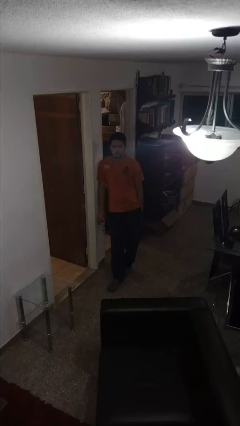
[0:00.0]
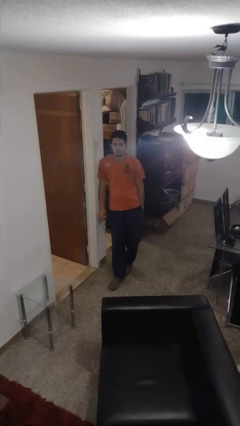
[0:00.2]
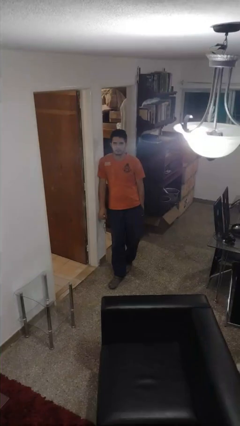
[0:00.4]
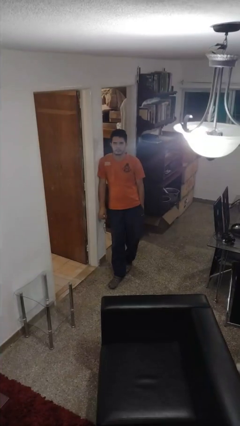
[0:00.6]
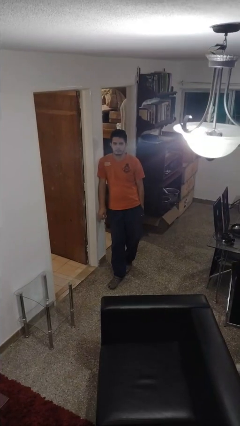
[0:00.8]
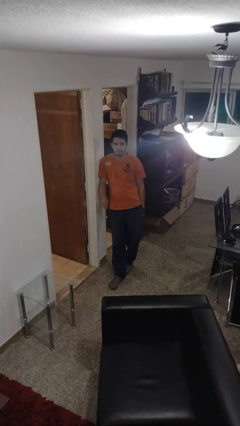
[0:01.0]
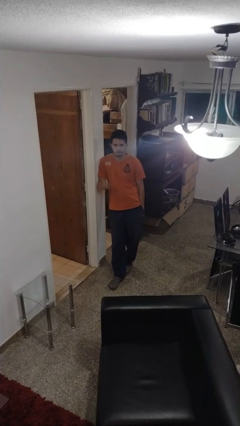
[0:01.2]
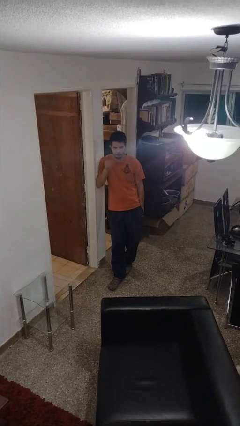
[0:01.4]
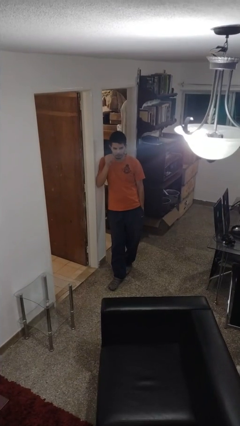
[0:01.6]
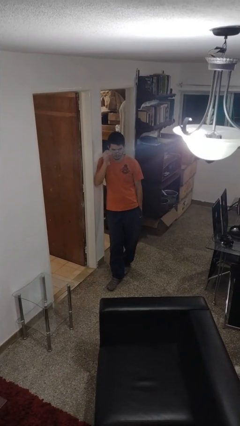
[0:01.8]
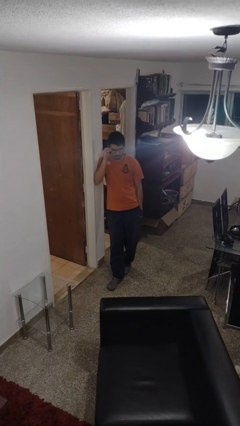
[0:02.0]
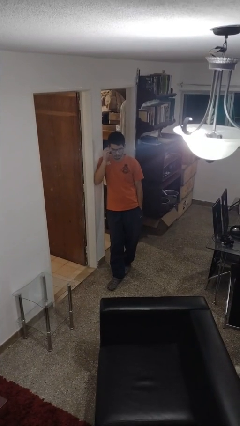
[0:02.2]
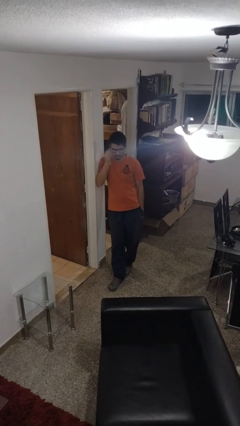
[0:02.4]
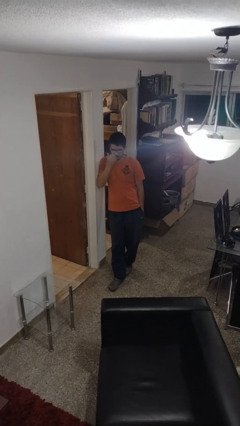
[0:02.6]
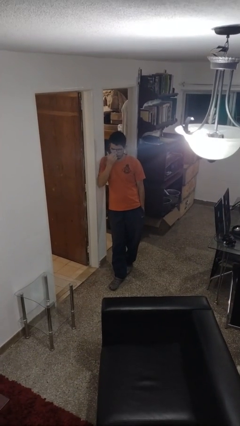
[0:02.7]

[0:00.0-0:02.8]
person puts on glasses

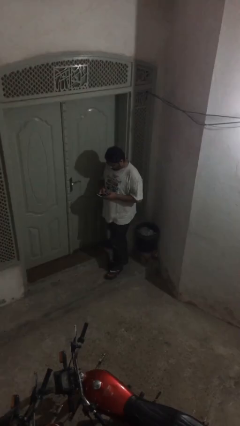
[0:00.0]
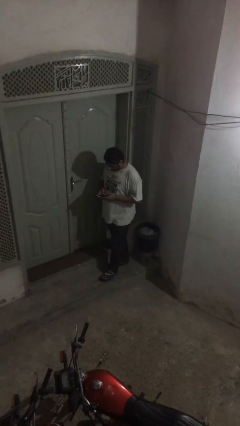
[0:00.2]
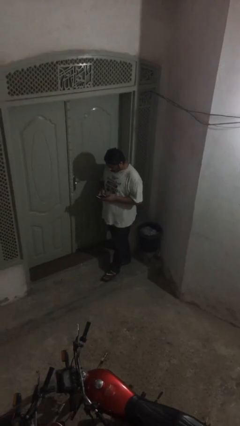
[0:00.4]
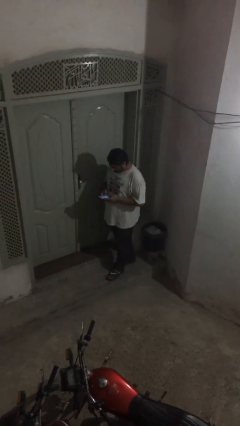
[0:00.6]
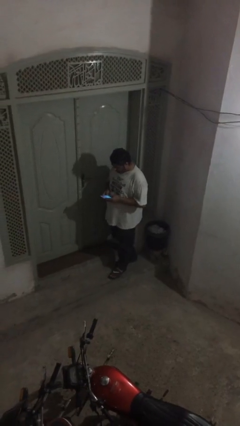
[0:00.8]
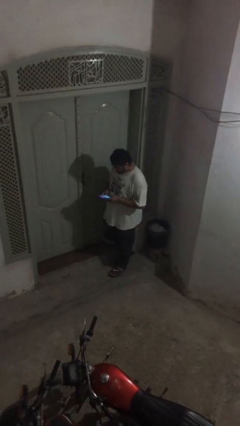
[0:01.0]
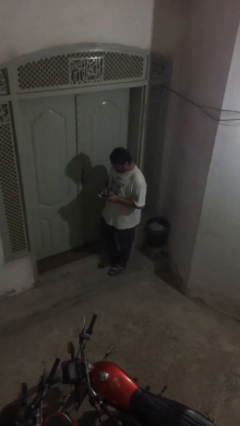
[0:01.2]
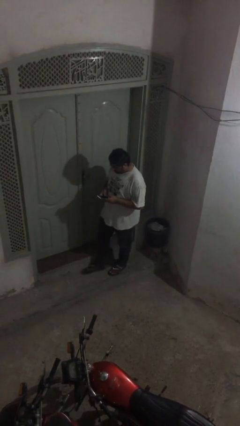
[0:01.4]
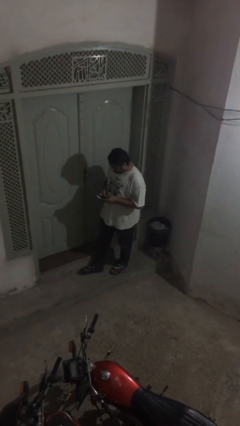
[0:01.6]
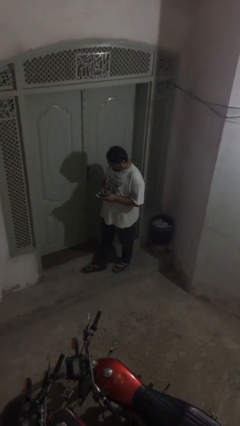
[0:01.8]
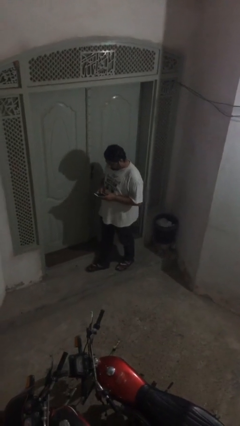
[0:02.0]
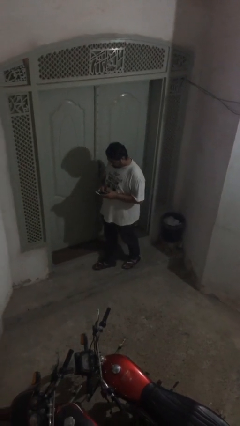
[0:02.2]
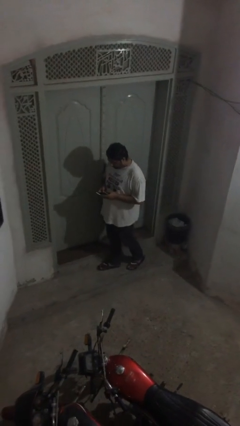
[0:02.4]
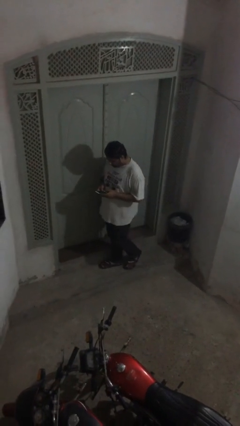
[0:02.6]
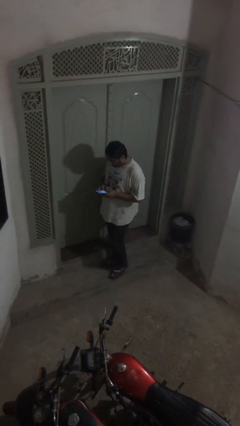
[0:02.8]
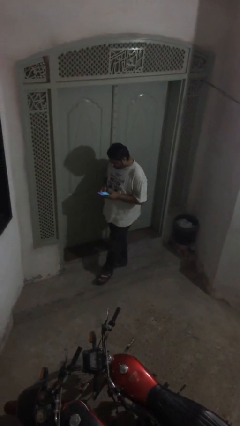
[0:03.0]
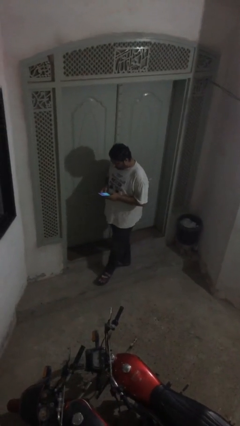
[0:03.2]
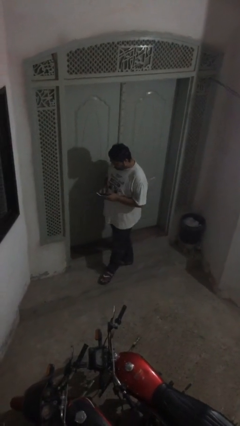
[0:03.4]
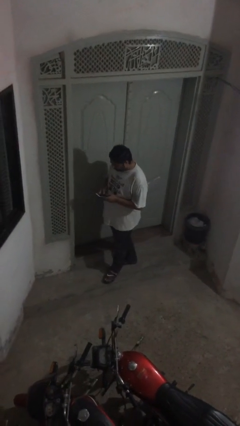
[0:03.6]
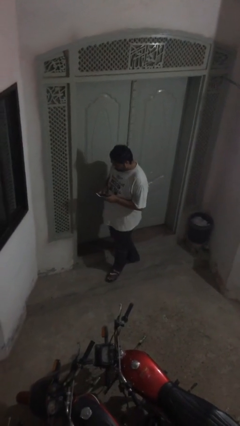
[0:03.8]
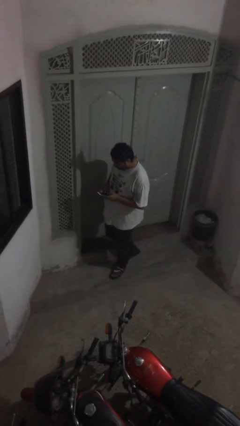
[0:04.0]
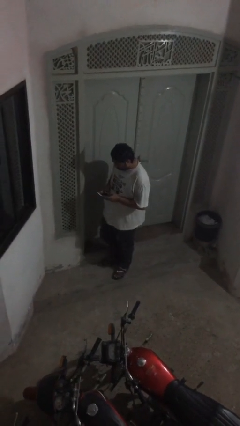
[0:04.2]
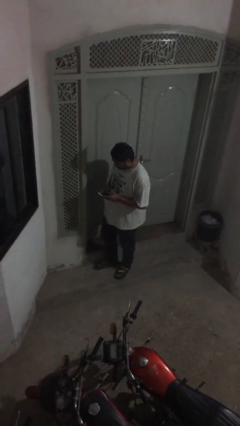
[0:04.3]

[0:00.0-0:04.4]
person texts on phone

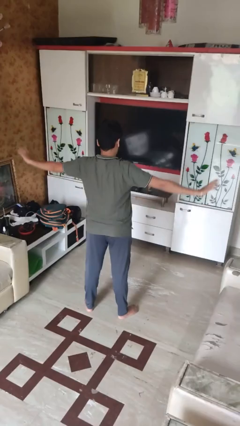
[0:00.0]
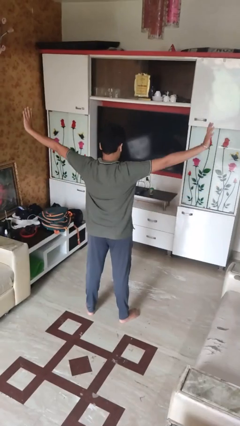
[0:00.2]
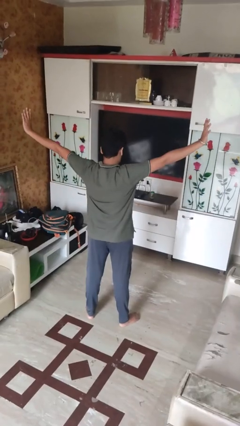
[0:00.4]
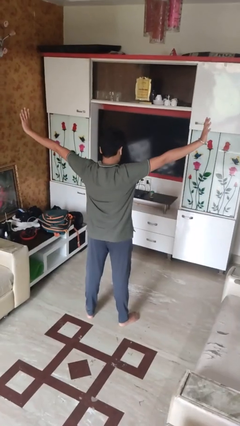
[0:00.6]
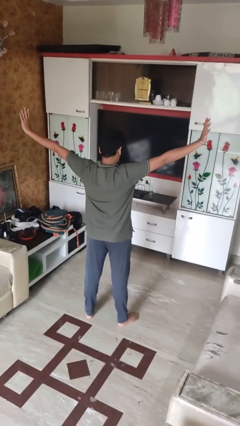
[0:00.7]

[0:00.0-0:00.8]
person stretches arms to side

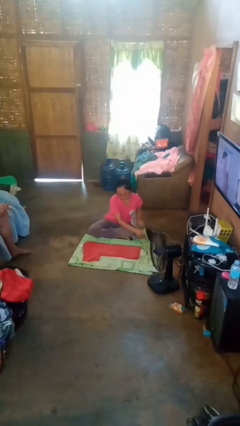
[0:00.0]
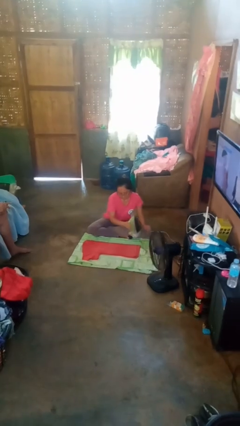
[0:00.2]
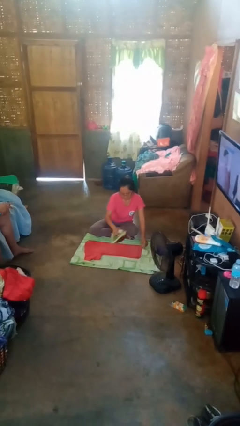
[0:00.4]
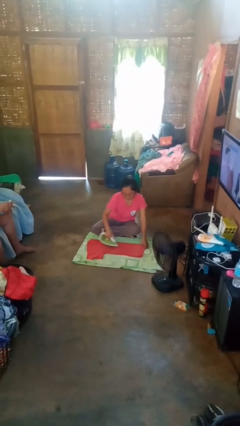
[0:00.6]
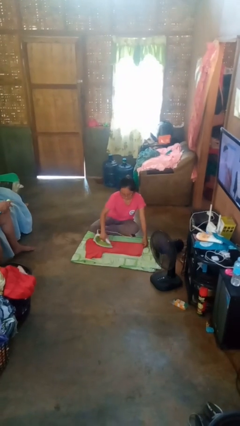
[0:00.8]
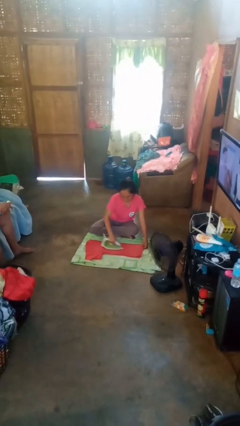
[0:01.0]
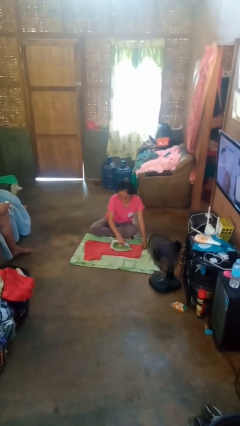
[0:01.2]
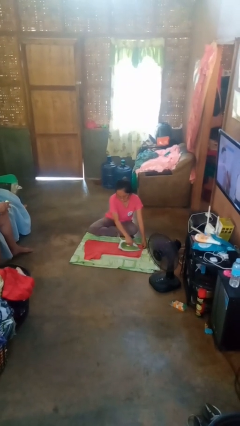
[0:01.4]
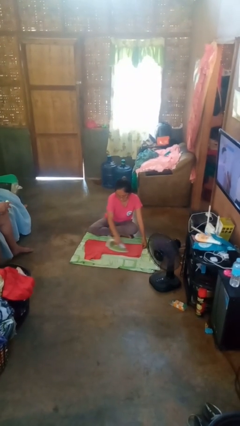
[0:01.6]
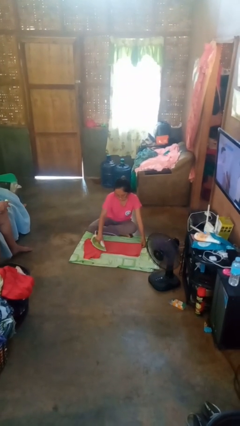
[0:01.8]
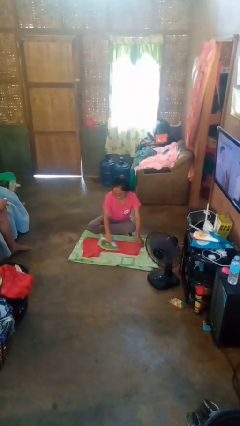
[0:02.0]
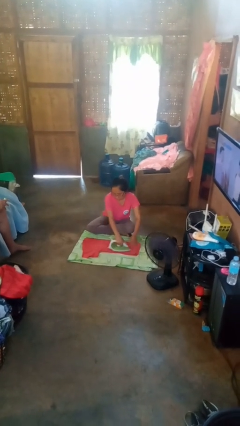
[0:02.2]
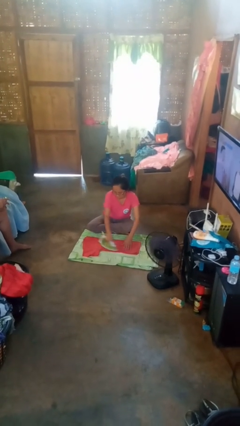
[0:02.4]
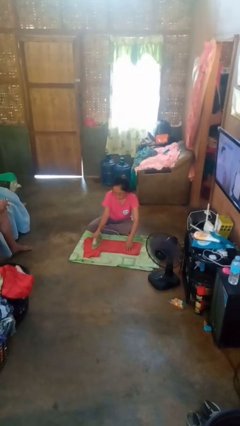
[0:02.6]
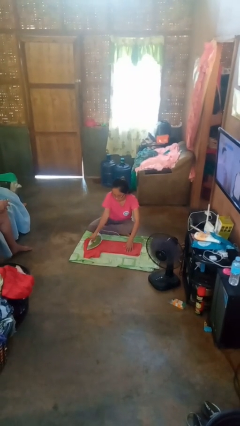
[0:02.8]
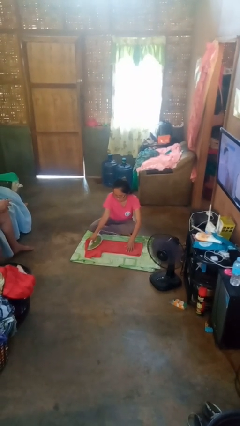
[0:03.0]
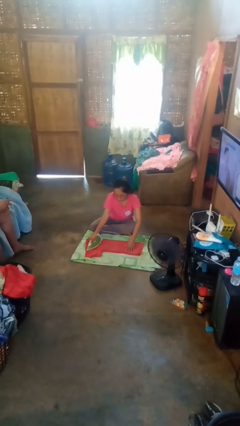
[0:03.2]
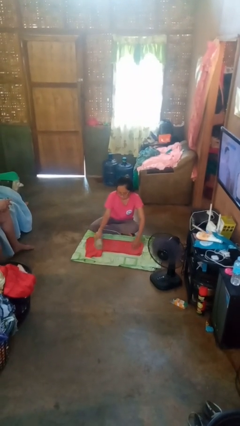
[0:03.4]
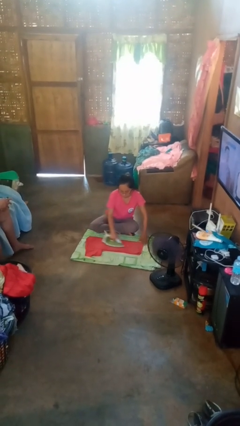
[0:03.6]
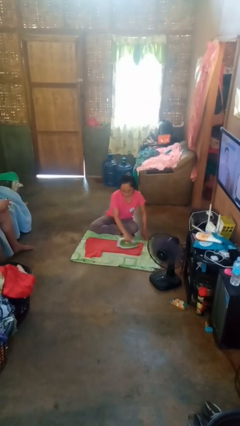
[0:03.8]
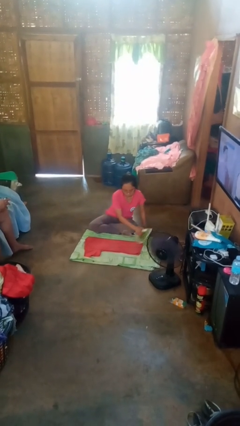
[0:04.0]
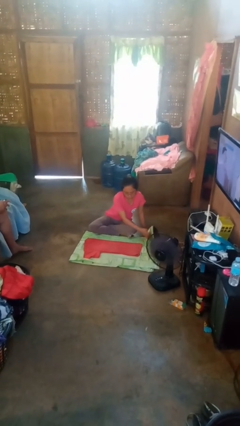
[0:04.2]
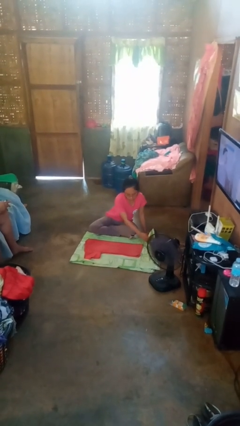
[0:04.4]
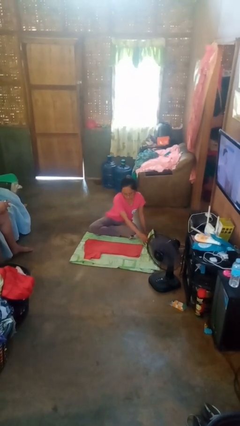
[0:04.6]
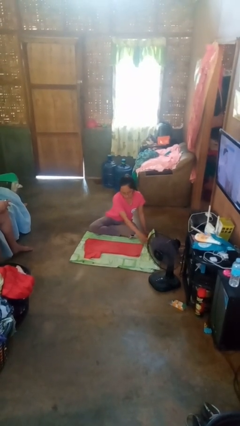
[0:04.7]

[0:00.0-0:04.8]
person irons clothes

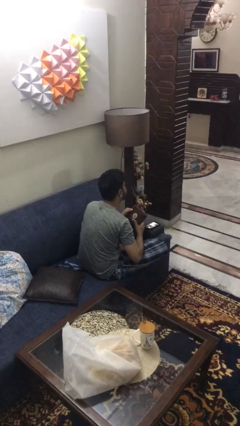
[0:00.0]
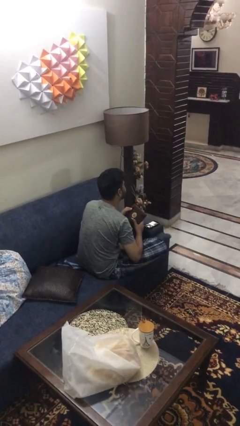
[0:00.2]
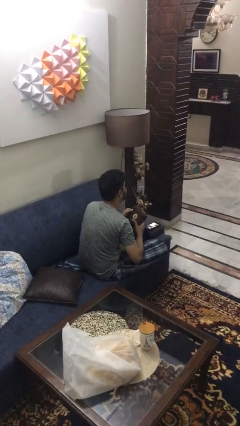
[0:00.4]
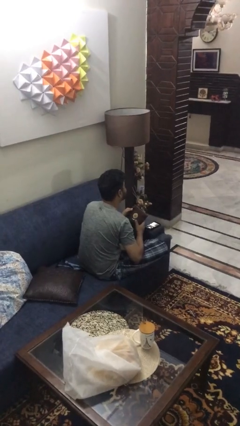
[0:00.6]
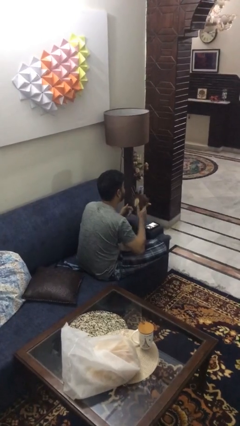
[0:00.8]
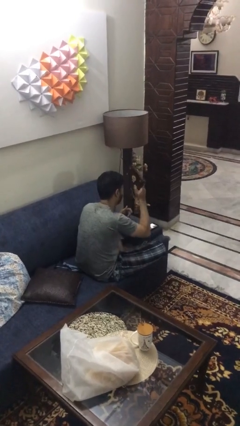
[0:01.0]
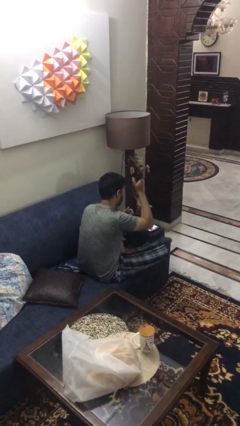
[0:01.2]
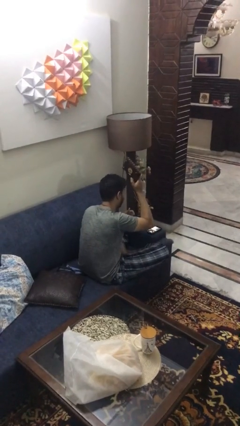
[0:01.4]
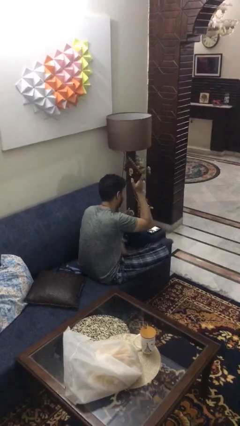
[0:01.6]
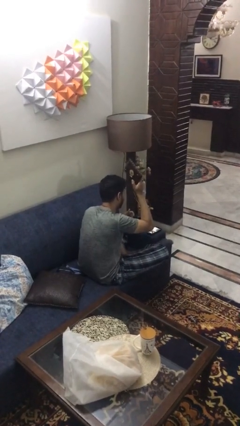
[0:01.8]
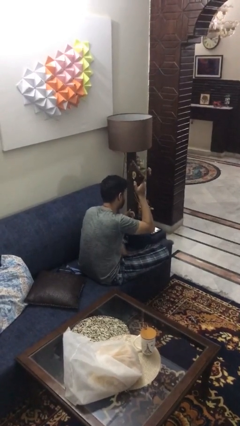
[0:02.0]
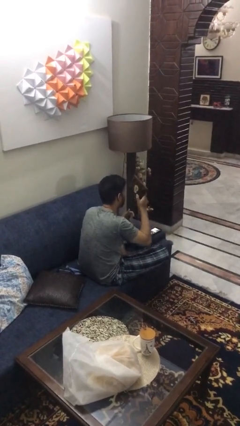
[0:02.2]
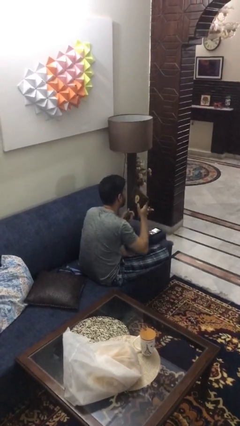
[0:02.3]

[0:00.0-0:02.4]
person holds object above head

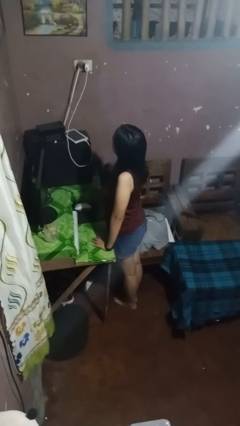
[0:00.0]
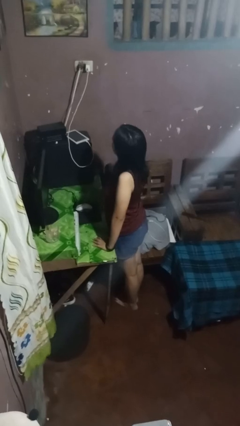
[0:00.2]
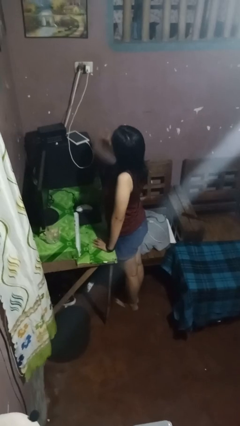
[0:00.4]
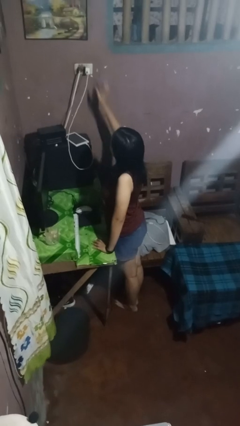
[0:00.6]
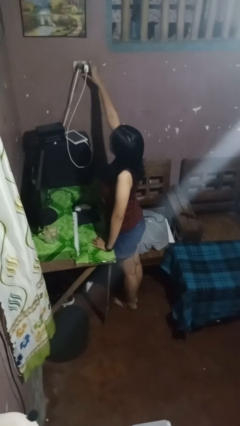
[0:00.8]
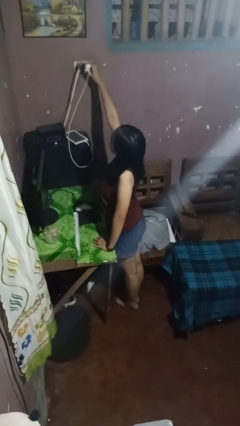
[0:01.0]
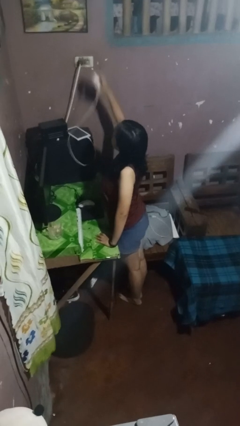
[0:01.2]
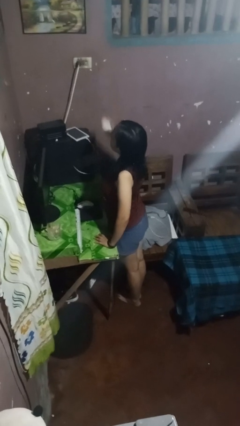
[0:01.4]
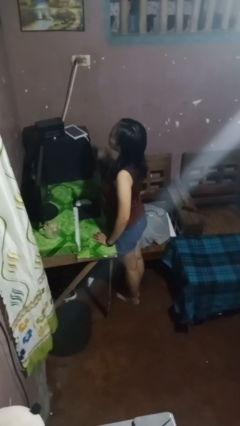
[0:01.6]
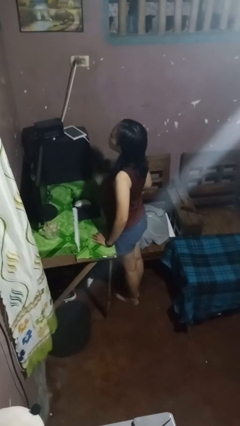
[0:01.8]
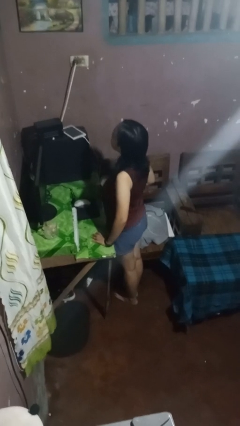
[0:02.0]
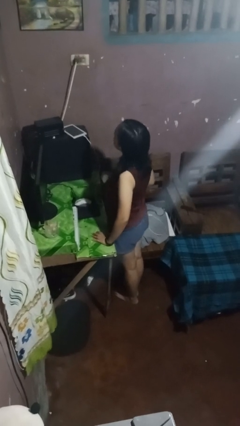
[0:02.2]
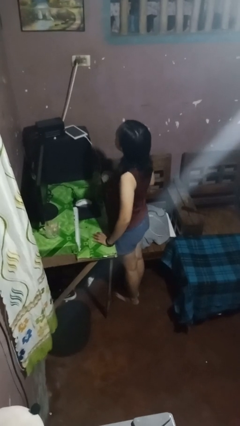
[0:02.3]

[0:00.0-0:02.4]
person unplugs from electrical socket
